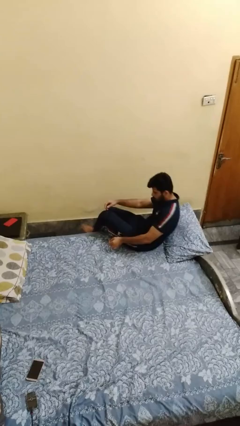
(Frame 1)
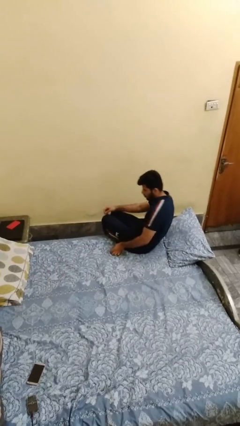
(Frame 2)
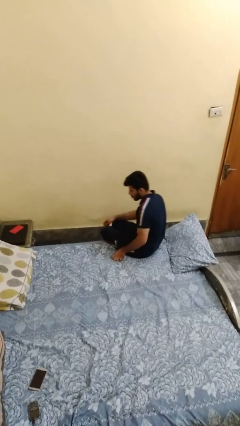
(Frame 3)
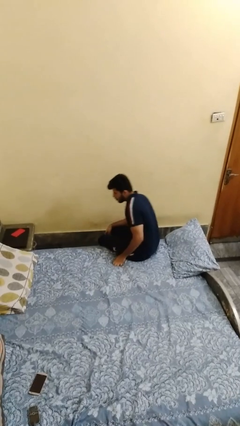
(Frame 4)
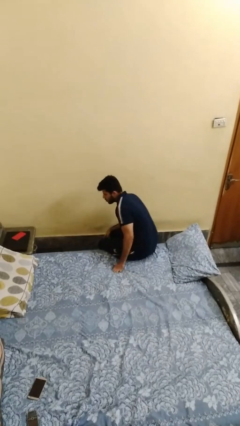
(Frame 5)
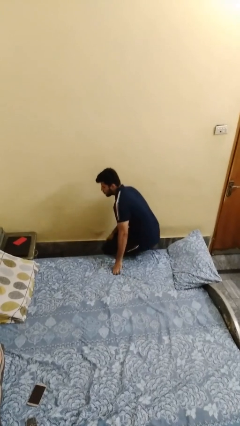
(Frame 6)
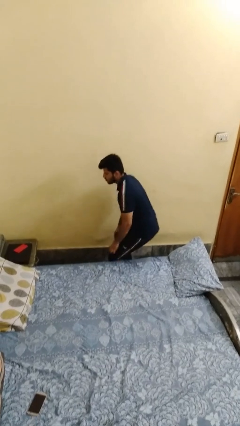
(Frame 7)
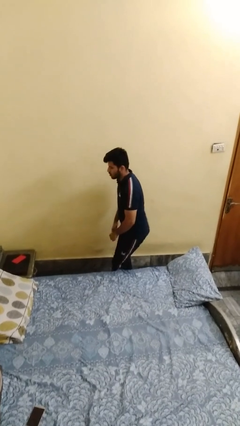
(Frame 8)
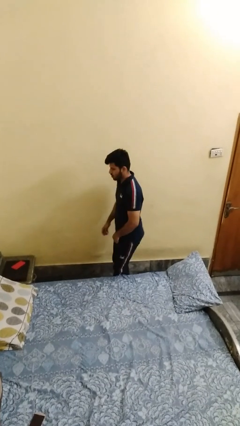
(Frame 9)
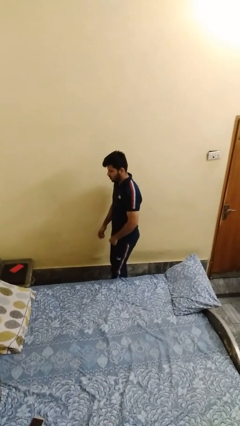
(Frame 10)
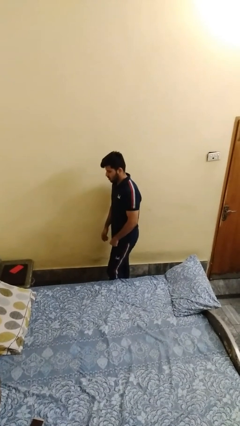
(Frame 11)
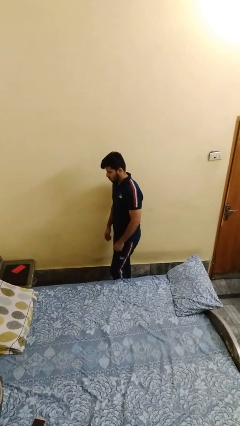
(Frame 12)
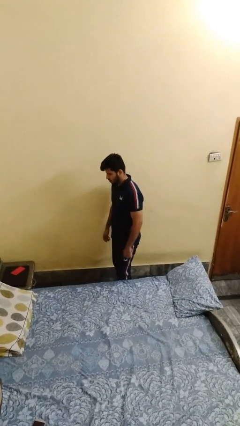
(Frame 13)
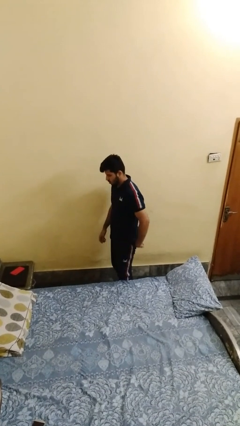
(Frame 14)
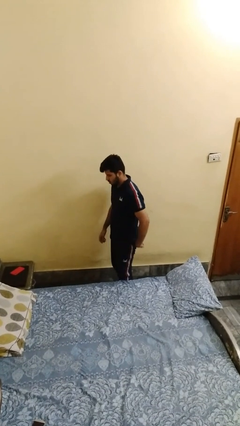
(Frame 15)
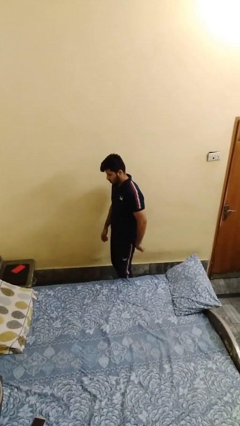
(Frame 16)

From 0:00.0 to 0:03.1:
person stands up

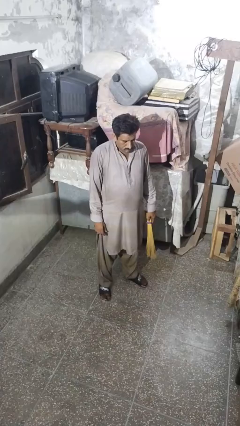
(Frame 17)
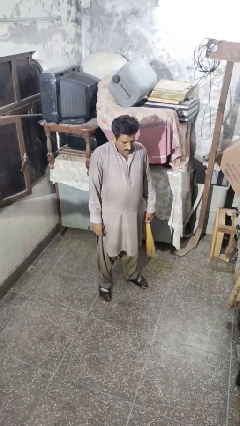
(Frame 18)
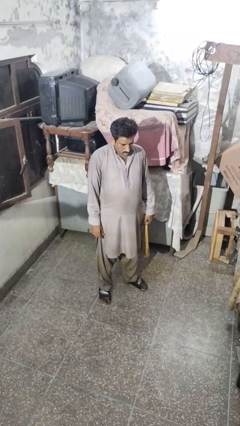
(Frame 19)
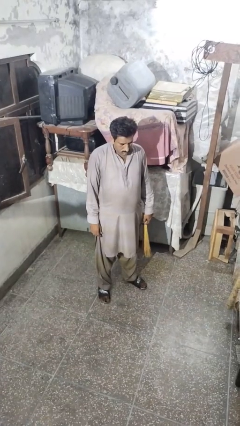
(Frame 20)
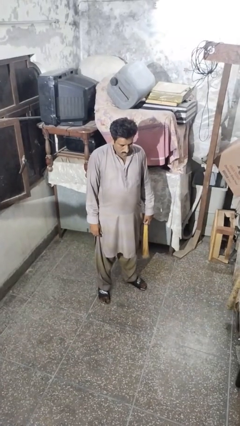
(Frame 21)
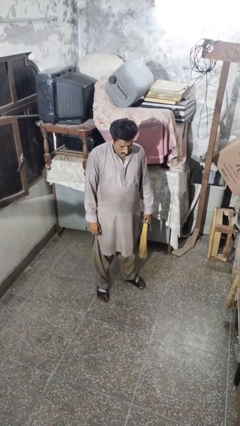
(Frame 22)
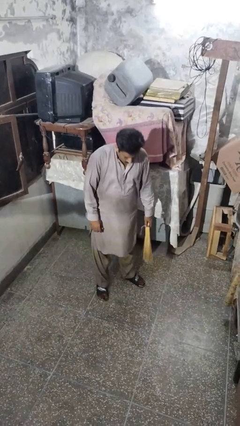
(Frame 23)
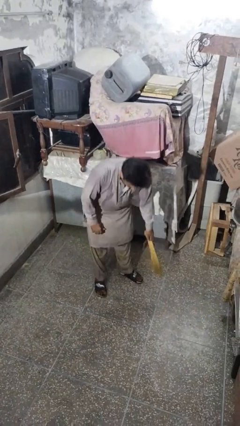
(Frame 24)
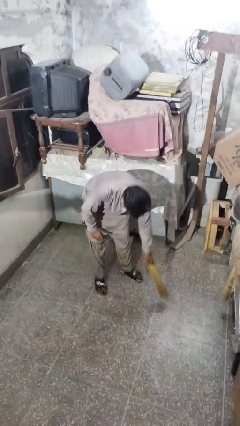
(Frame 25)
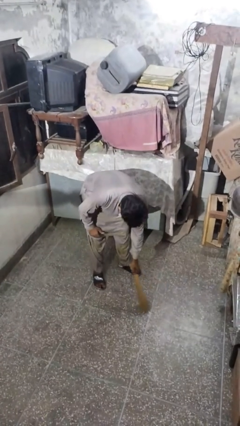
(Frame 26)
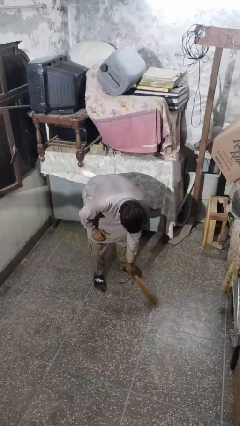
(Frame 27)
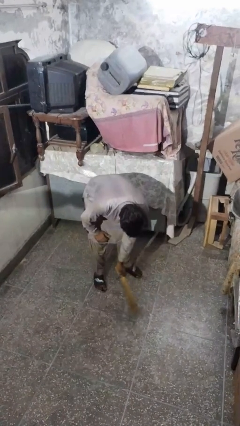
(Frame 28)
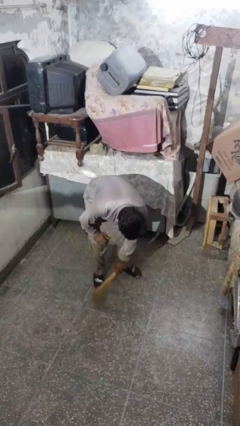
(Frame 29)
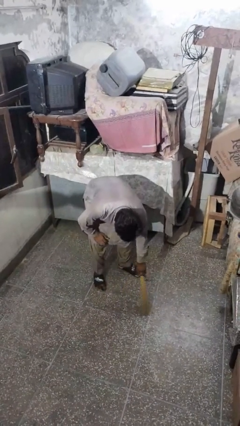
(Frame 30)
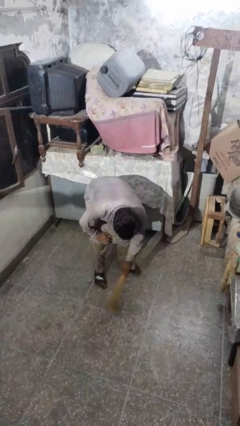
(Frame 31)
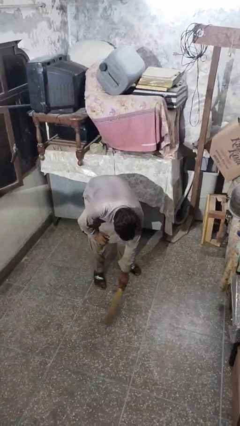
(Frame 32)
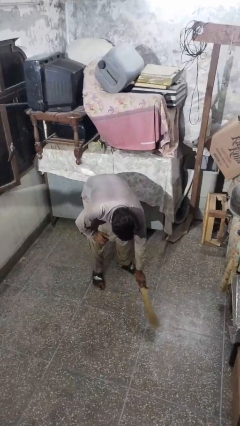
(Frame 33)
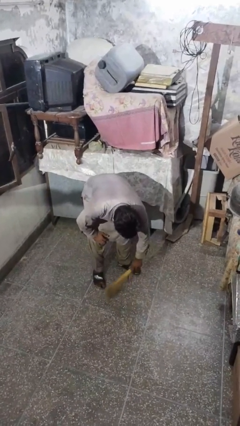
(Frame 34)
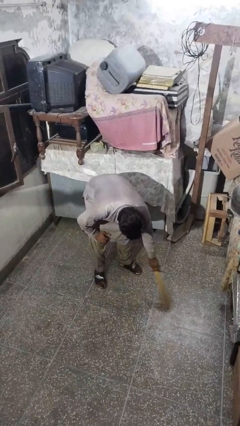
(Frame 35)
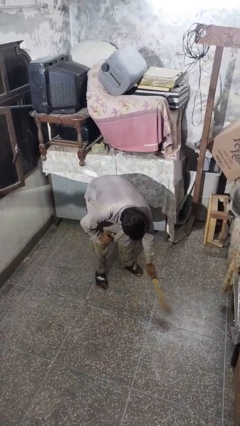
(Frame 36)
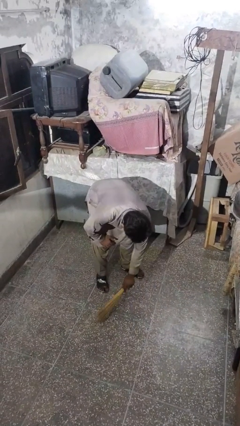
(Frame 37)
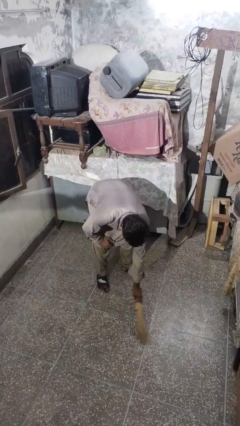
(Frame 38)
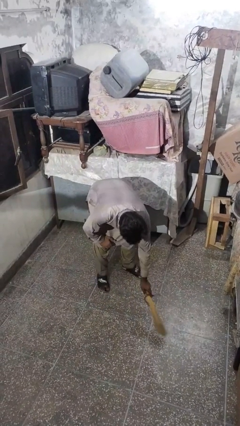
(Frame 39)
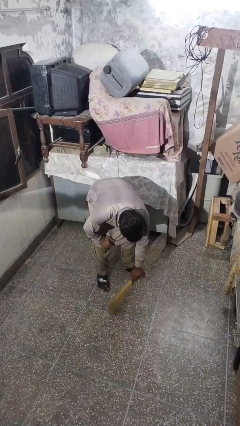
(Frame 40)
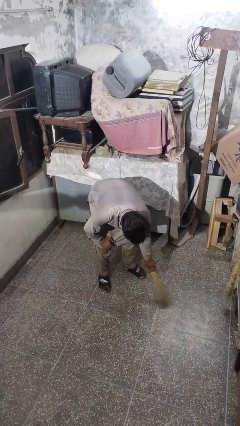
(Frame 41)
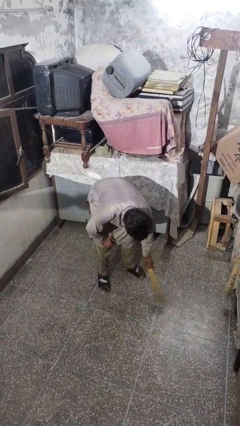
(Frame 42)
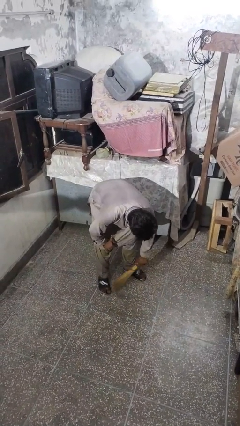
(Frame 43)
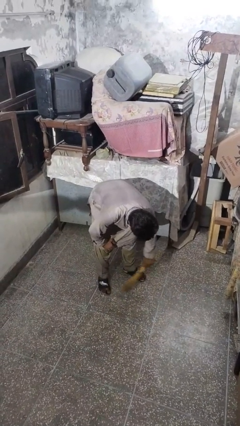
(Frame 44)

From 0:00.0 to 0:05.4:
person sweeps floor

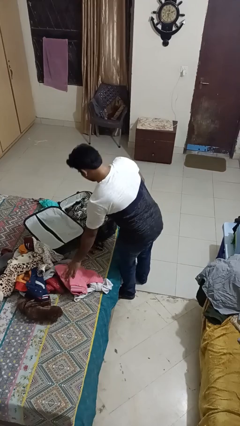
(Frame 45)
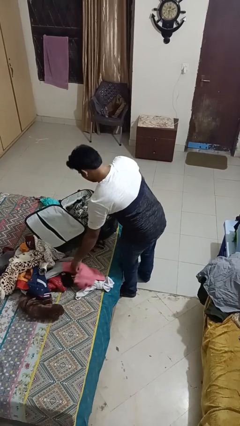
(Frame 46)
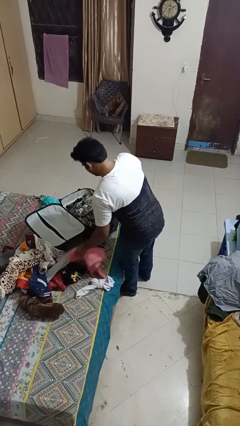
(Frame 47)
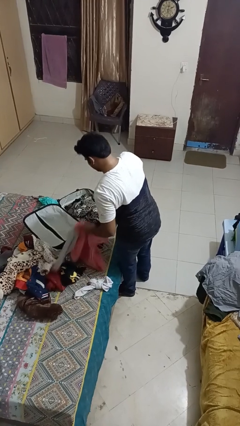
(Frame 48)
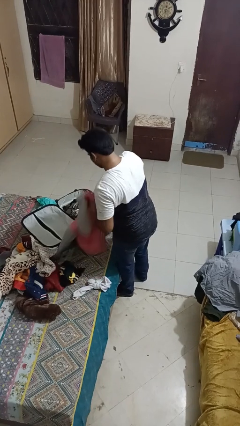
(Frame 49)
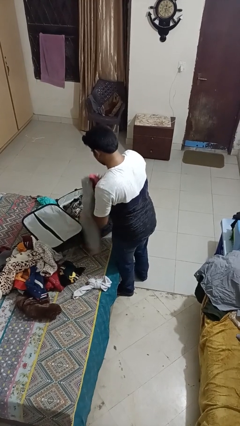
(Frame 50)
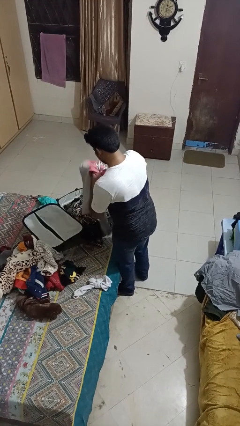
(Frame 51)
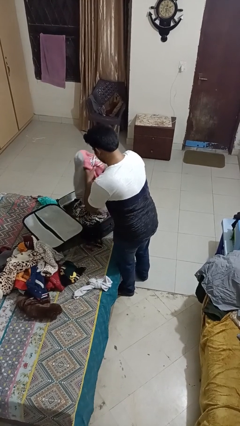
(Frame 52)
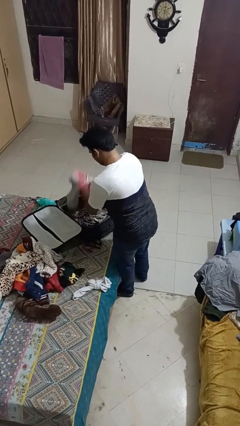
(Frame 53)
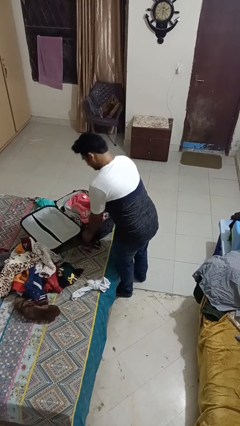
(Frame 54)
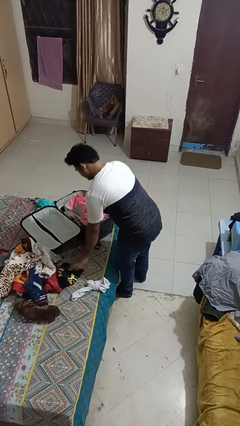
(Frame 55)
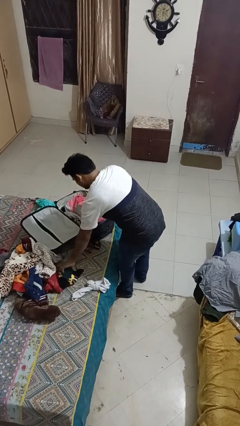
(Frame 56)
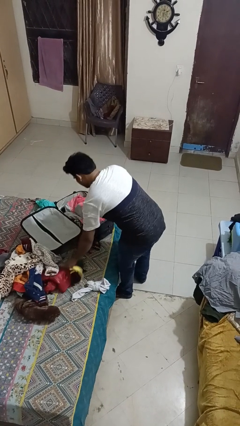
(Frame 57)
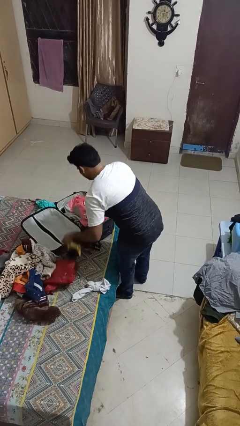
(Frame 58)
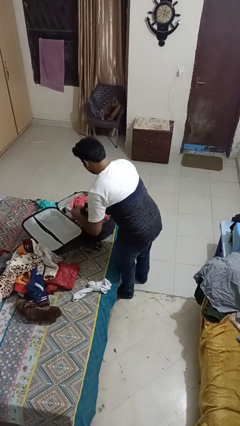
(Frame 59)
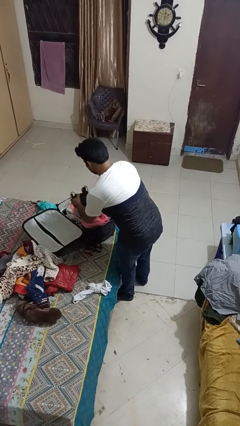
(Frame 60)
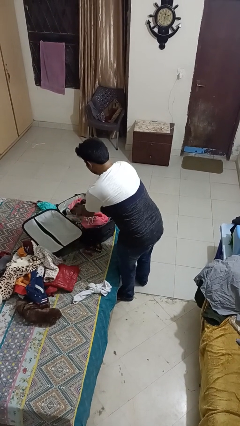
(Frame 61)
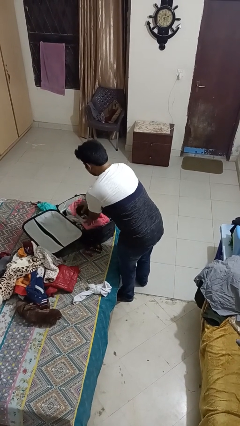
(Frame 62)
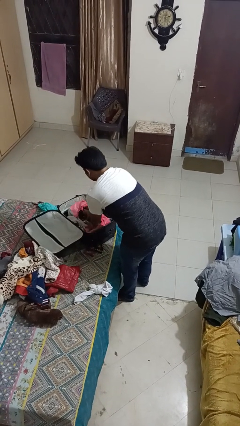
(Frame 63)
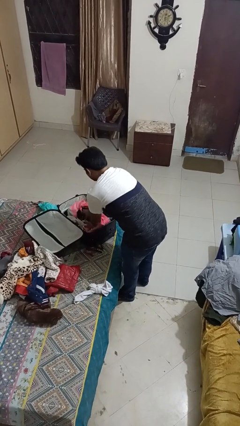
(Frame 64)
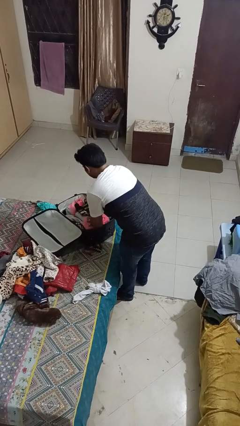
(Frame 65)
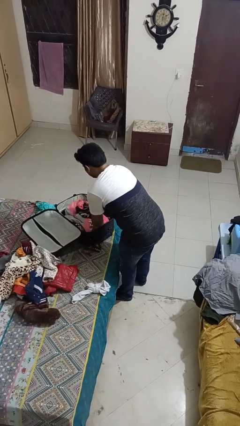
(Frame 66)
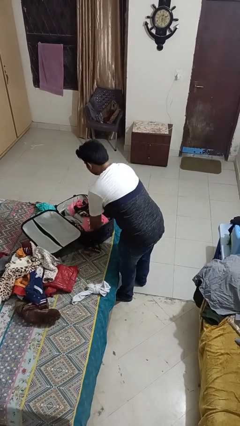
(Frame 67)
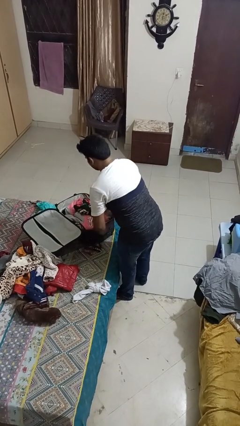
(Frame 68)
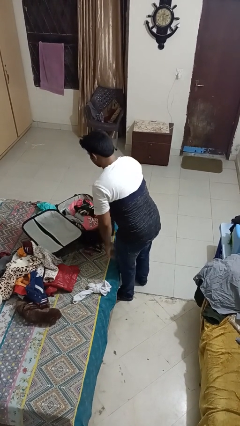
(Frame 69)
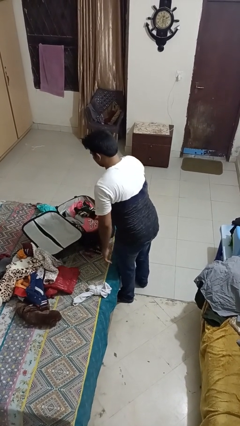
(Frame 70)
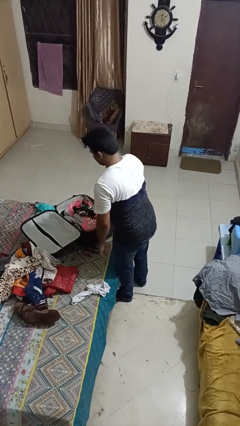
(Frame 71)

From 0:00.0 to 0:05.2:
person loads clothes into suitcase

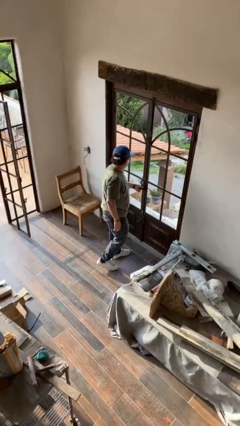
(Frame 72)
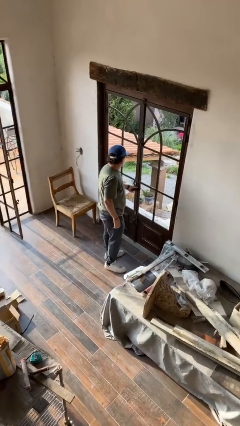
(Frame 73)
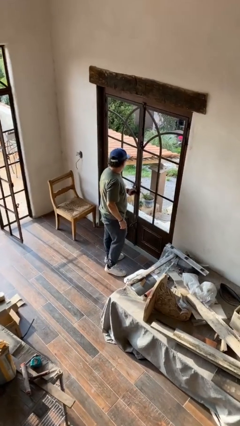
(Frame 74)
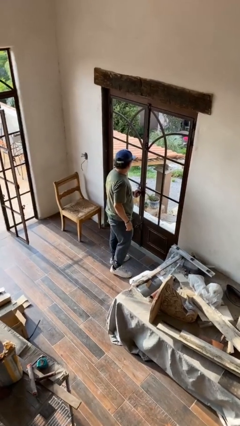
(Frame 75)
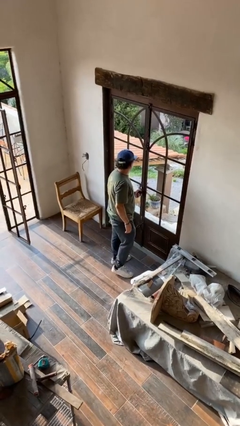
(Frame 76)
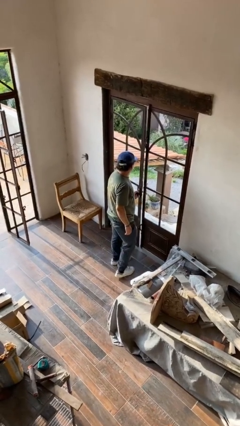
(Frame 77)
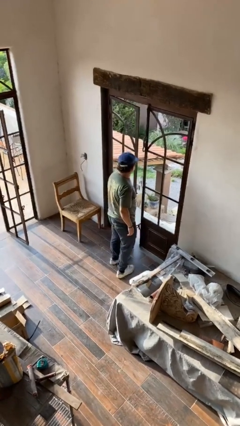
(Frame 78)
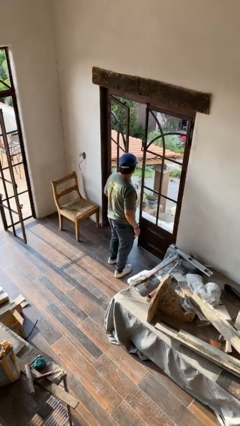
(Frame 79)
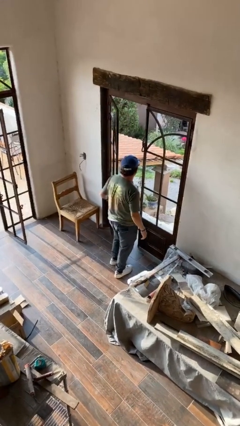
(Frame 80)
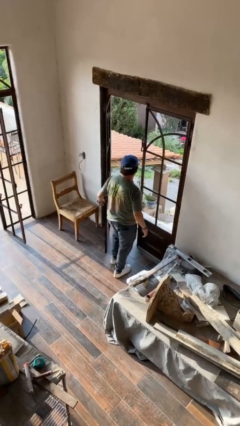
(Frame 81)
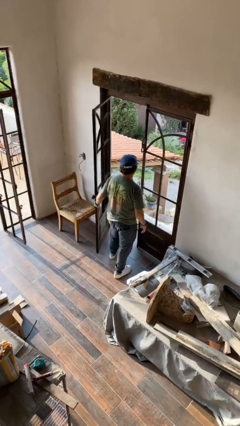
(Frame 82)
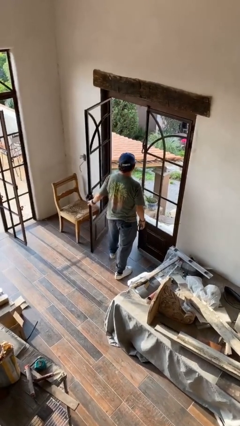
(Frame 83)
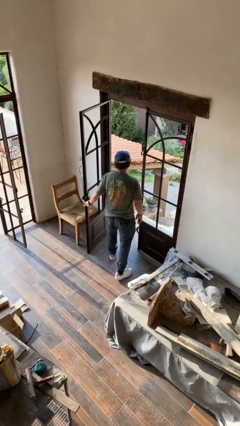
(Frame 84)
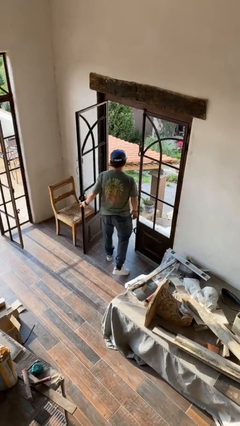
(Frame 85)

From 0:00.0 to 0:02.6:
person opens facility door

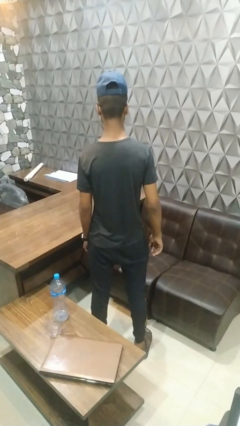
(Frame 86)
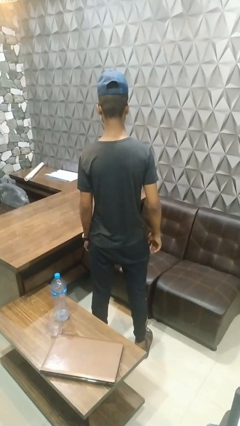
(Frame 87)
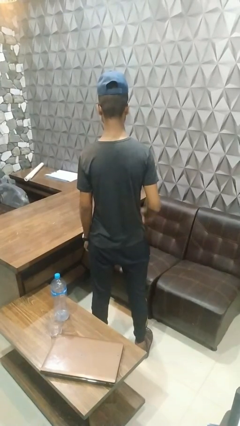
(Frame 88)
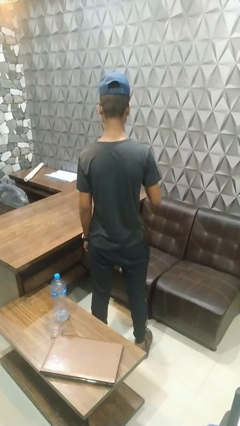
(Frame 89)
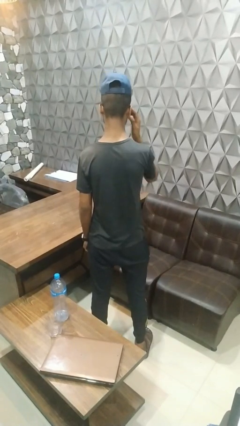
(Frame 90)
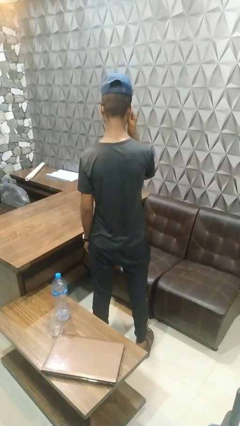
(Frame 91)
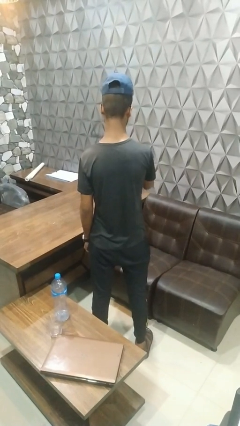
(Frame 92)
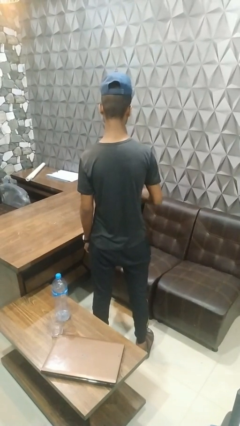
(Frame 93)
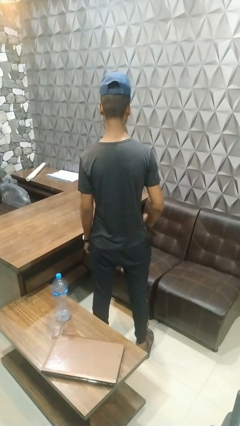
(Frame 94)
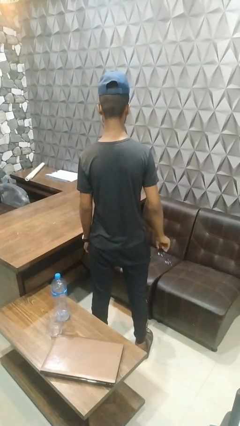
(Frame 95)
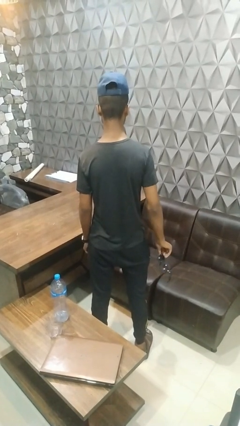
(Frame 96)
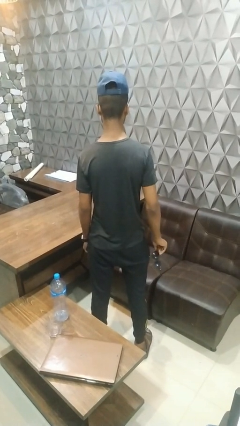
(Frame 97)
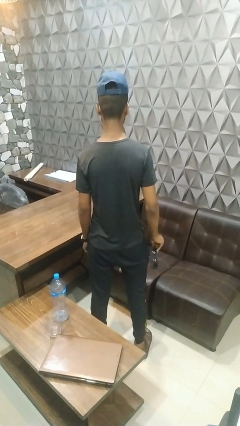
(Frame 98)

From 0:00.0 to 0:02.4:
person takes off sunglasses
